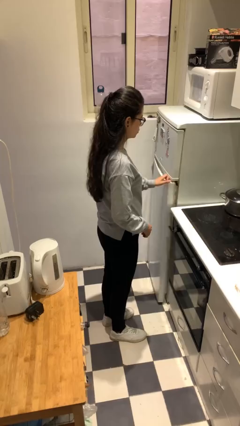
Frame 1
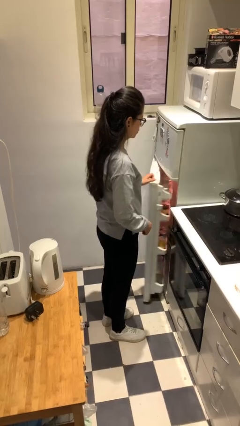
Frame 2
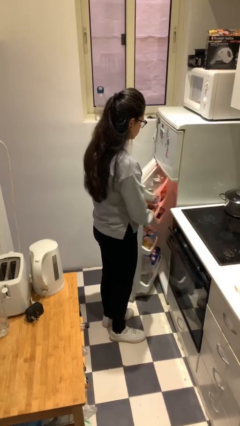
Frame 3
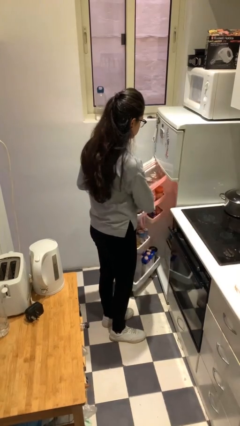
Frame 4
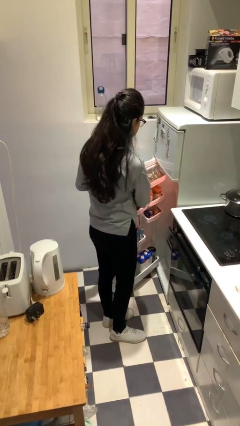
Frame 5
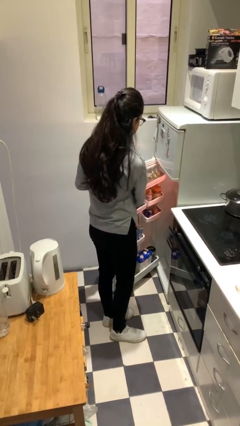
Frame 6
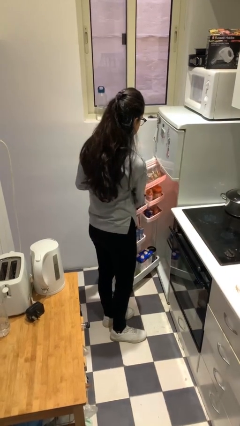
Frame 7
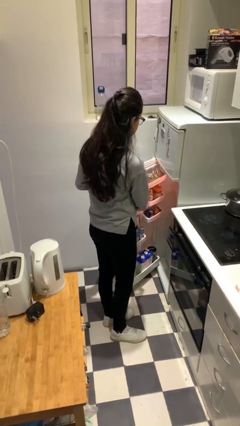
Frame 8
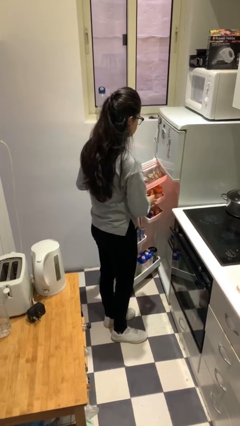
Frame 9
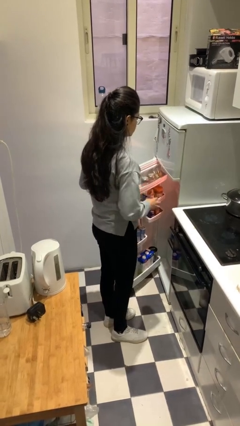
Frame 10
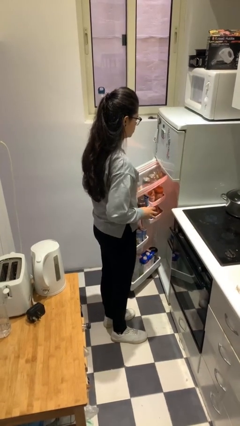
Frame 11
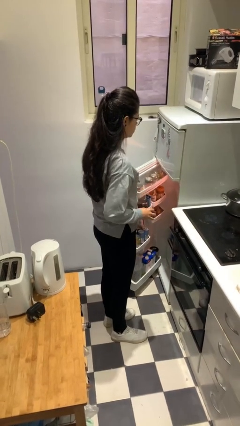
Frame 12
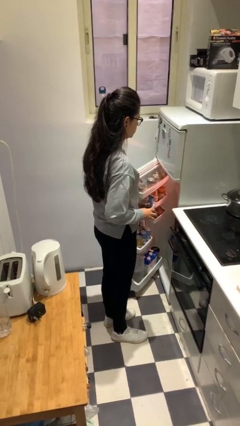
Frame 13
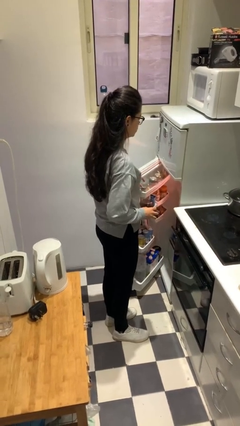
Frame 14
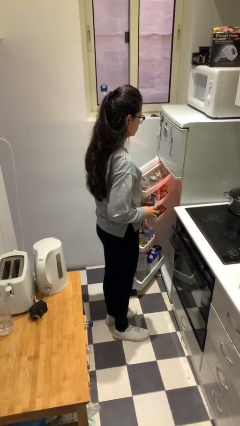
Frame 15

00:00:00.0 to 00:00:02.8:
person puts object into refrigerator

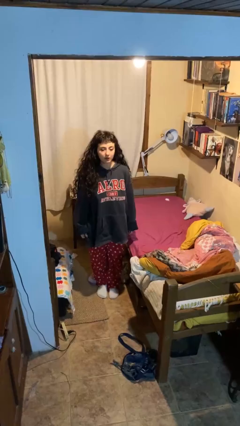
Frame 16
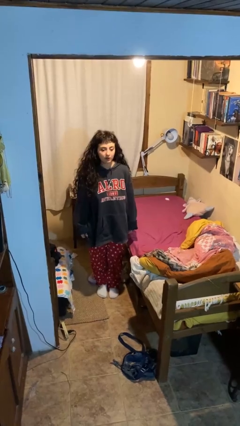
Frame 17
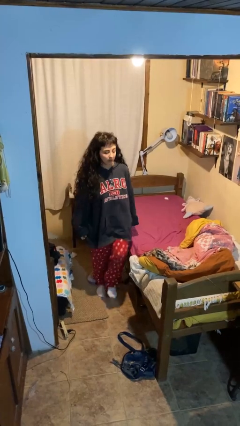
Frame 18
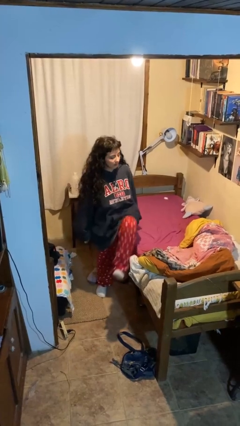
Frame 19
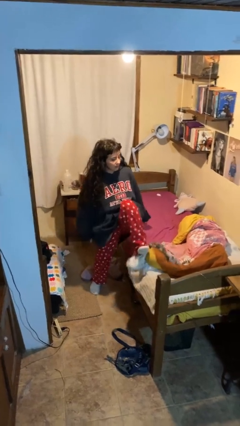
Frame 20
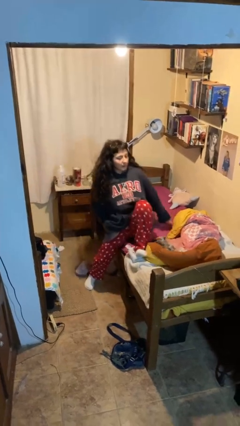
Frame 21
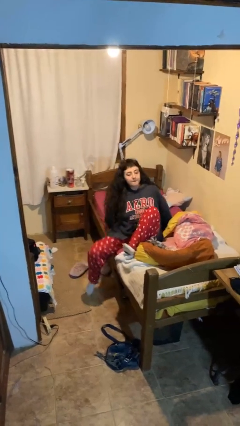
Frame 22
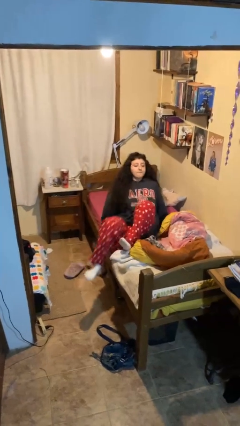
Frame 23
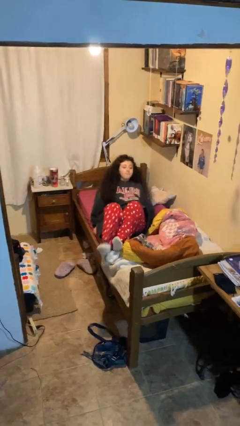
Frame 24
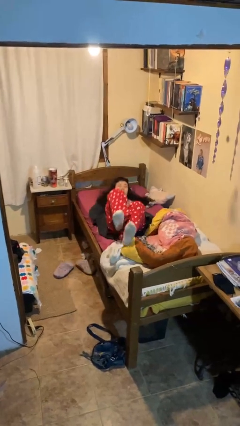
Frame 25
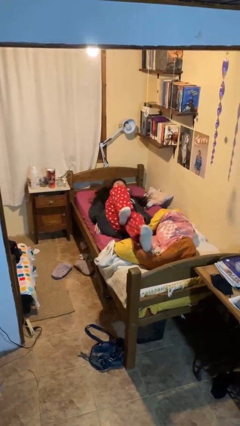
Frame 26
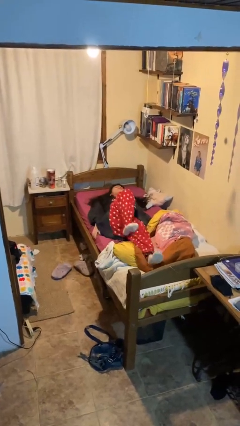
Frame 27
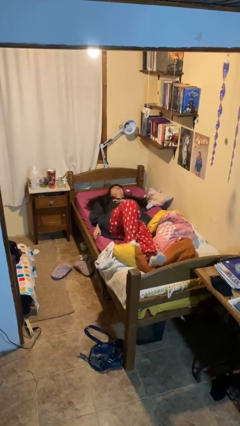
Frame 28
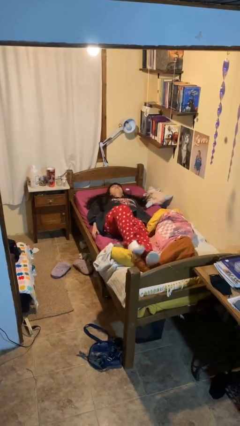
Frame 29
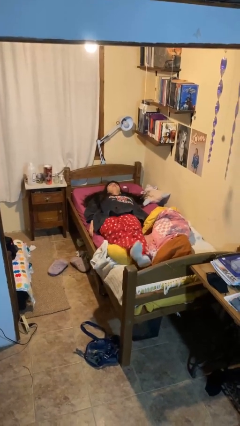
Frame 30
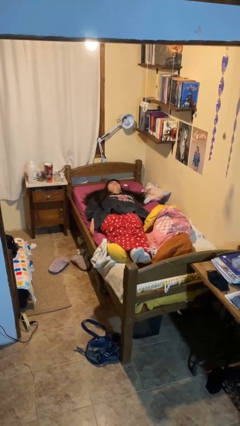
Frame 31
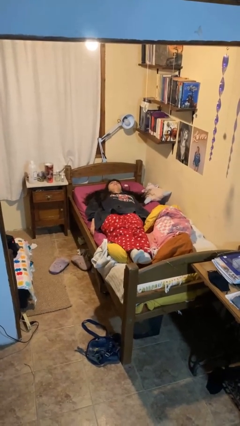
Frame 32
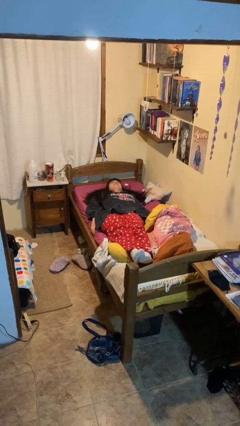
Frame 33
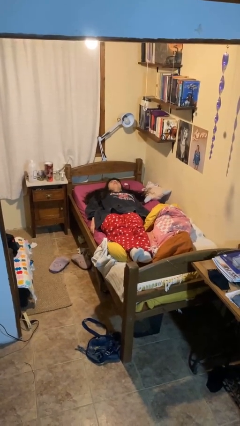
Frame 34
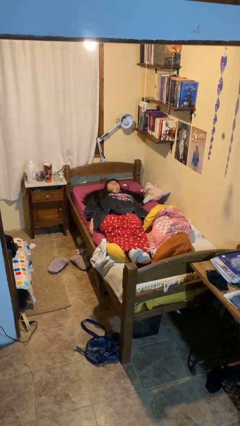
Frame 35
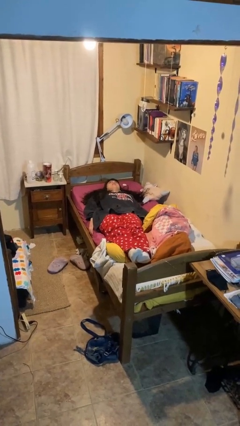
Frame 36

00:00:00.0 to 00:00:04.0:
person lies down on bed

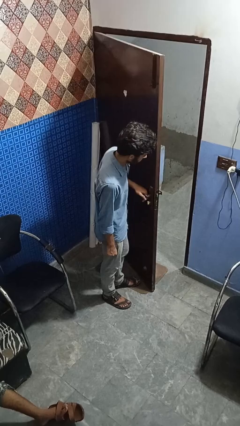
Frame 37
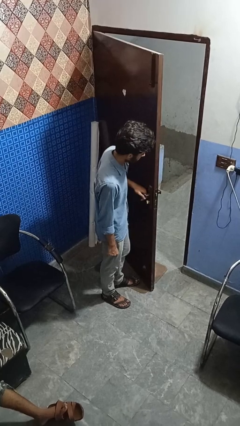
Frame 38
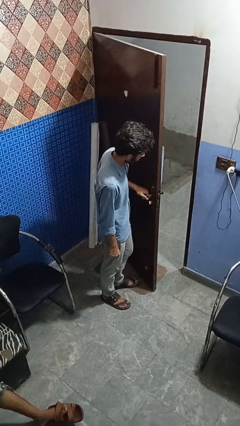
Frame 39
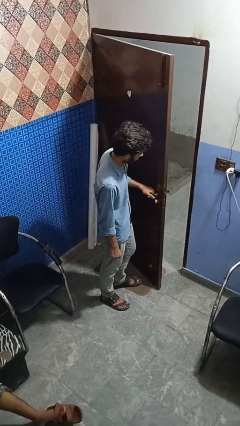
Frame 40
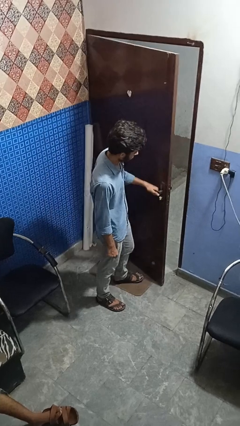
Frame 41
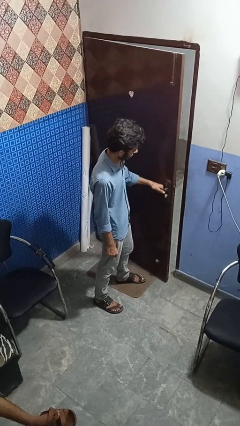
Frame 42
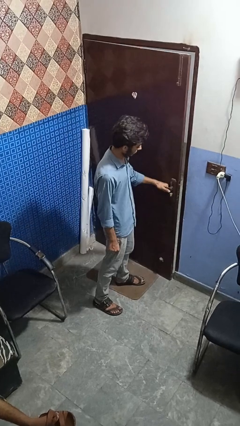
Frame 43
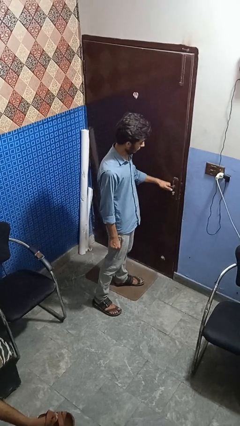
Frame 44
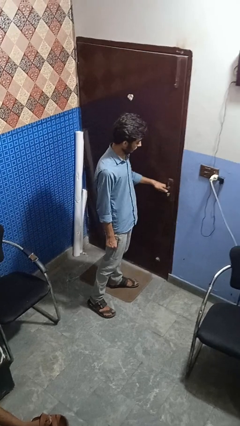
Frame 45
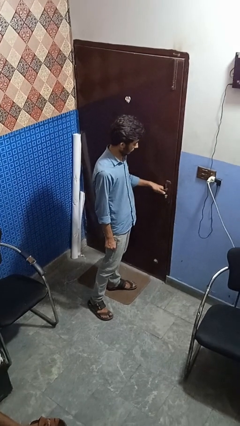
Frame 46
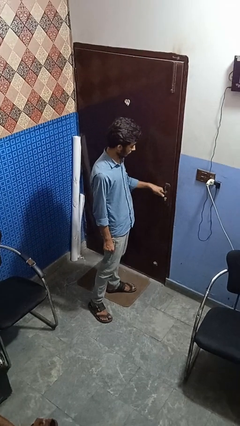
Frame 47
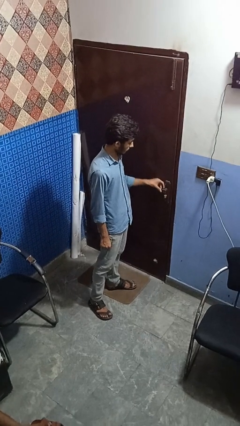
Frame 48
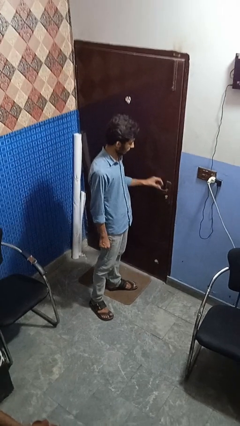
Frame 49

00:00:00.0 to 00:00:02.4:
person closes facility door

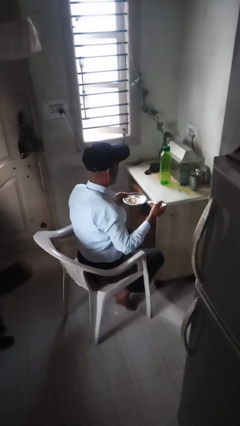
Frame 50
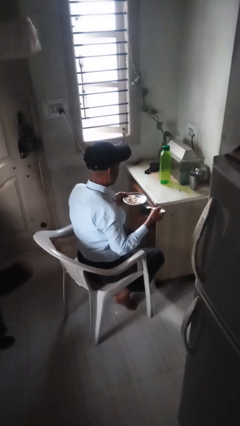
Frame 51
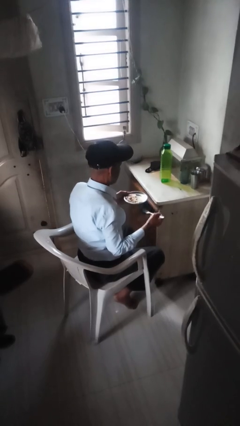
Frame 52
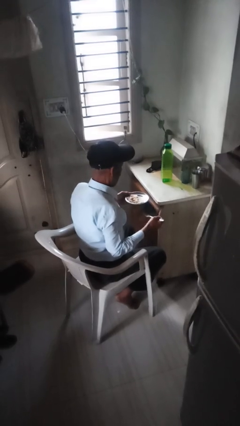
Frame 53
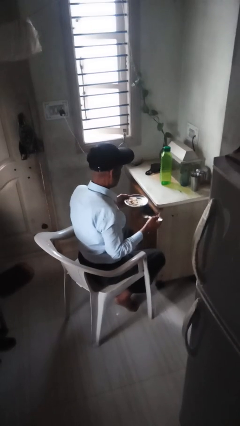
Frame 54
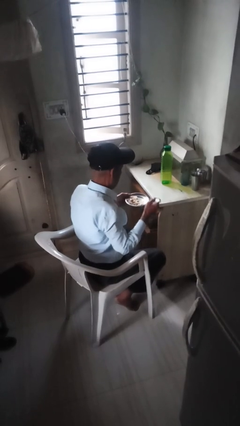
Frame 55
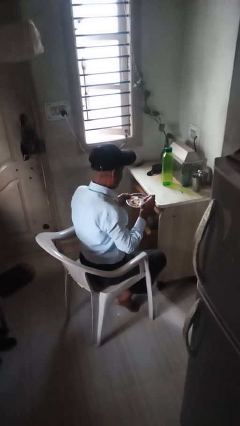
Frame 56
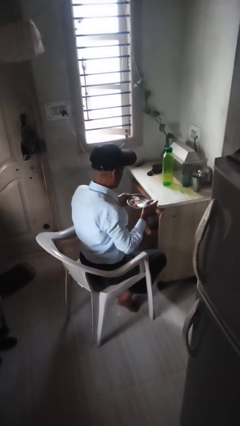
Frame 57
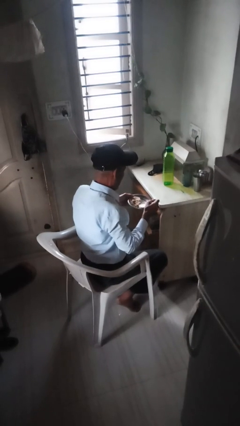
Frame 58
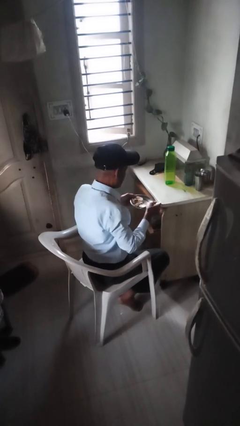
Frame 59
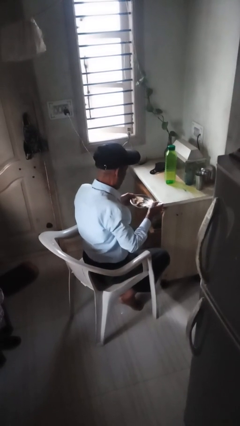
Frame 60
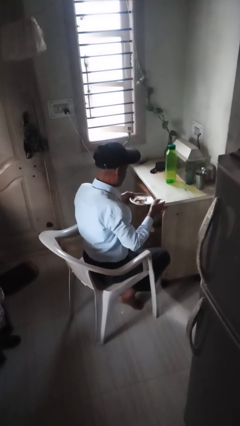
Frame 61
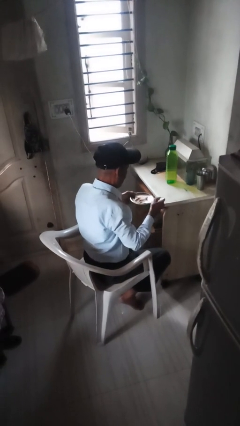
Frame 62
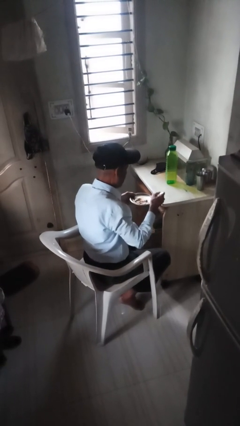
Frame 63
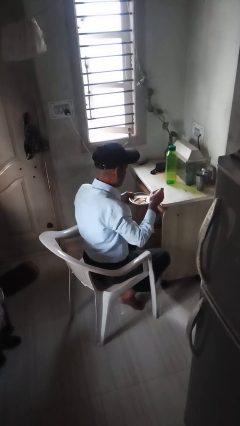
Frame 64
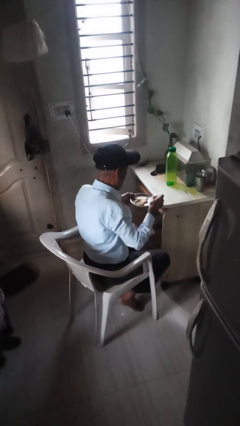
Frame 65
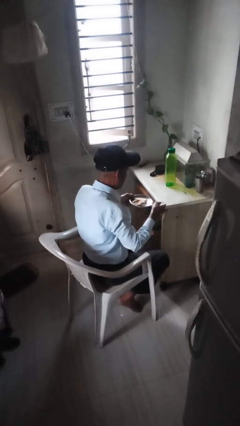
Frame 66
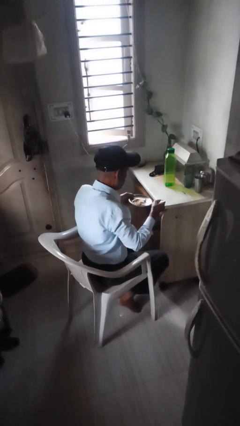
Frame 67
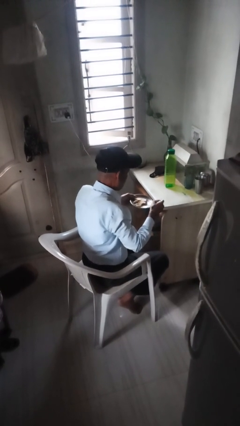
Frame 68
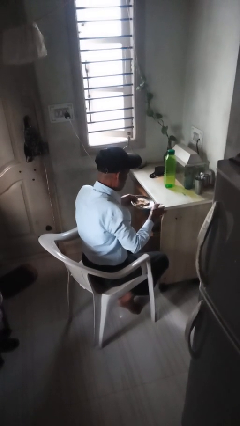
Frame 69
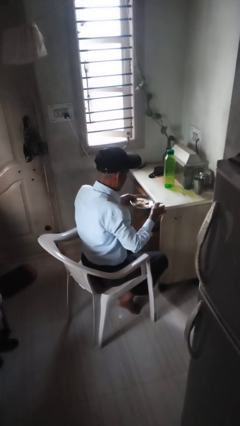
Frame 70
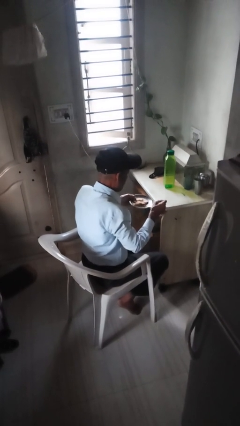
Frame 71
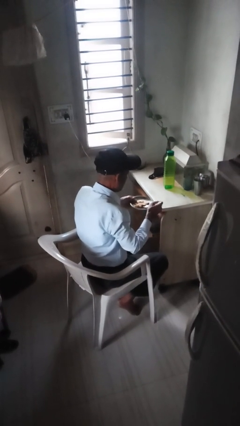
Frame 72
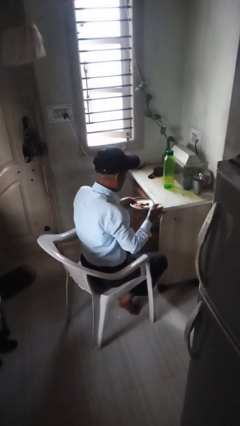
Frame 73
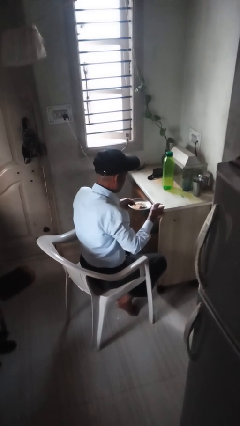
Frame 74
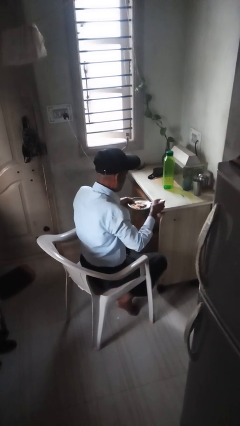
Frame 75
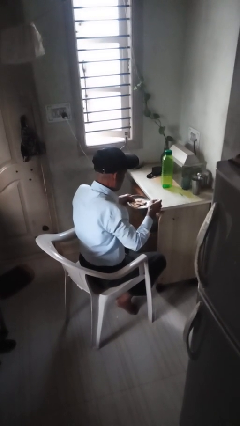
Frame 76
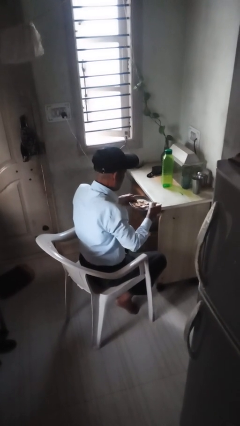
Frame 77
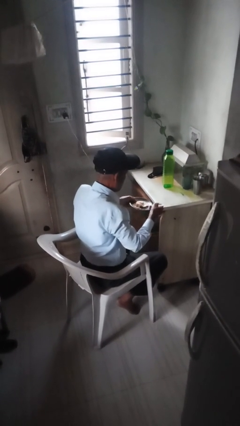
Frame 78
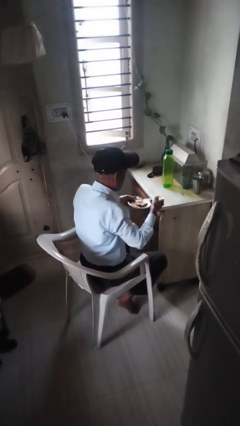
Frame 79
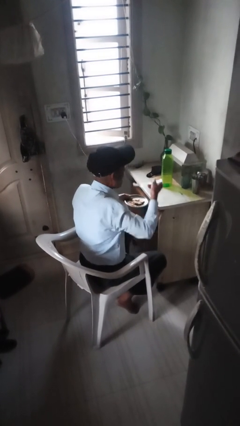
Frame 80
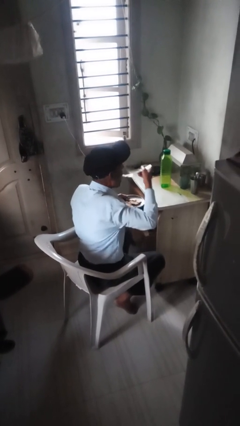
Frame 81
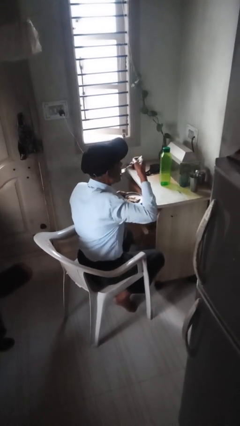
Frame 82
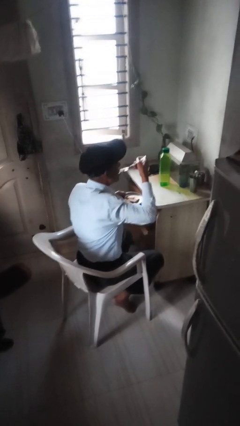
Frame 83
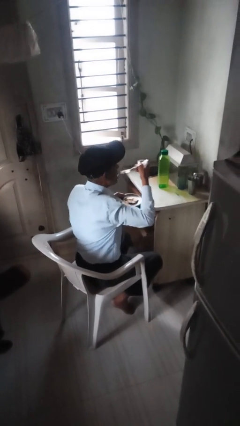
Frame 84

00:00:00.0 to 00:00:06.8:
person eats with utensil

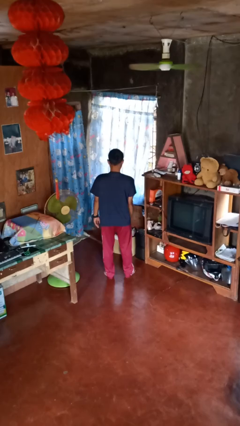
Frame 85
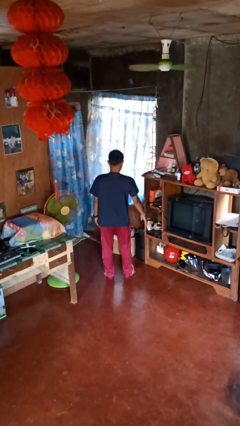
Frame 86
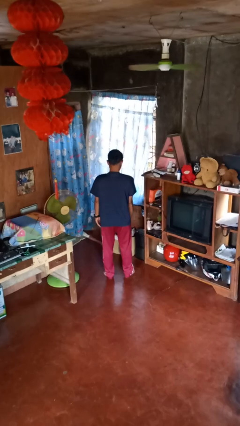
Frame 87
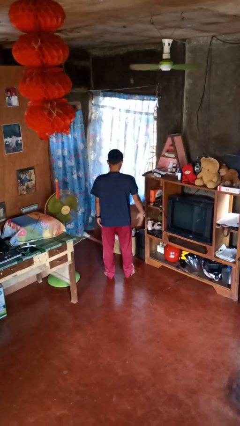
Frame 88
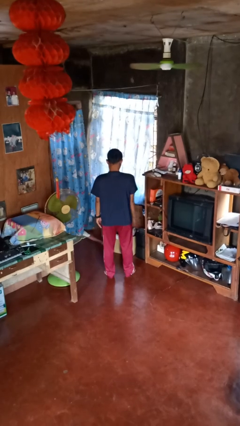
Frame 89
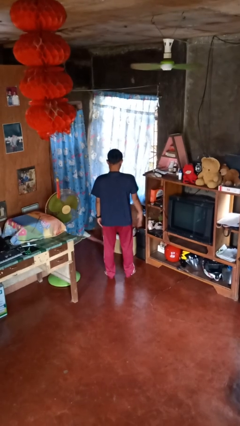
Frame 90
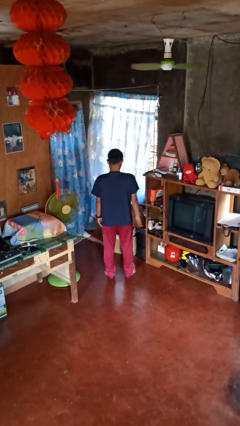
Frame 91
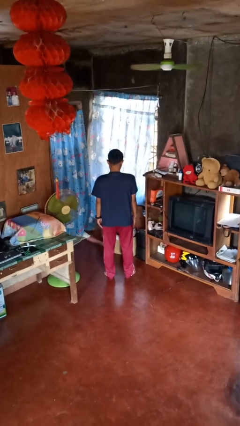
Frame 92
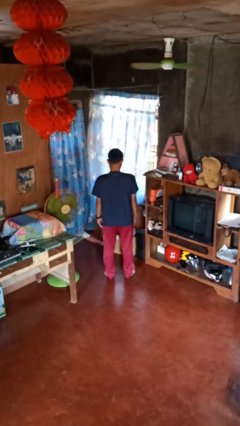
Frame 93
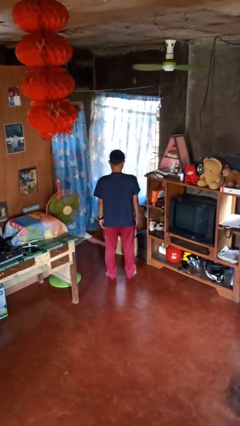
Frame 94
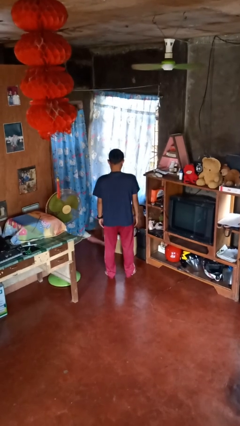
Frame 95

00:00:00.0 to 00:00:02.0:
person slaps hands on thighs
